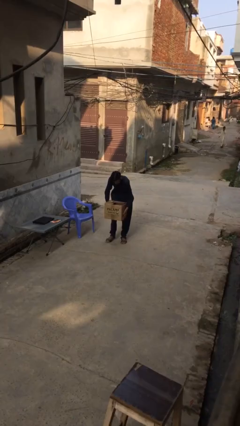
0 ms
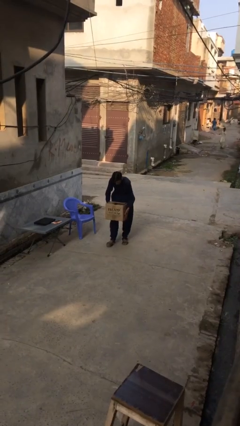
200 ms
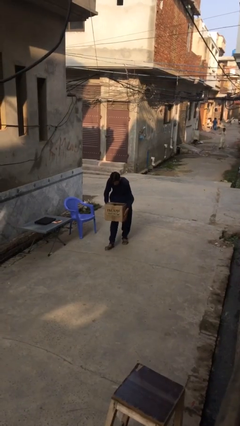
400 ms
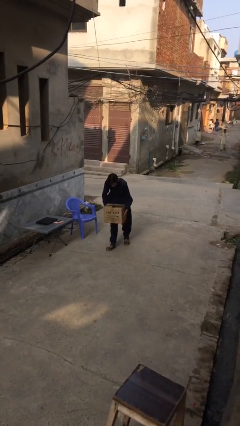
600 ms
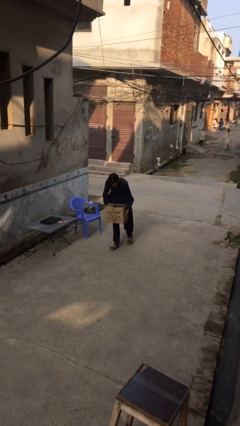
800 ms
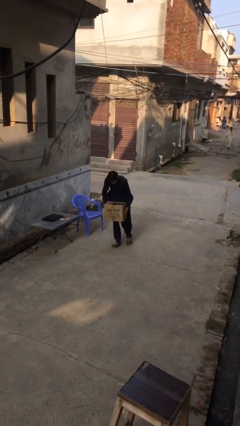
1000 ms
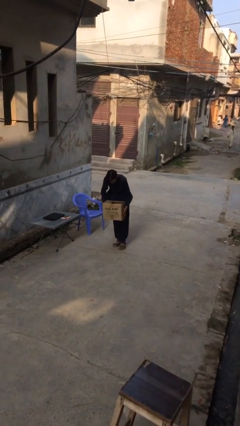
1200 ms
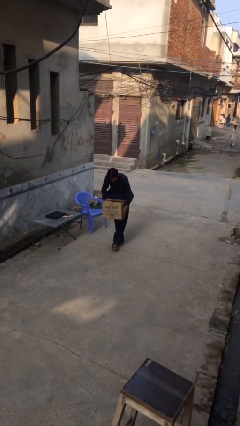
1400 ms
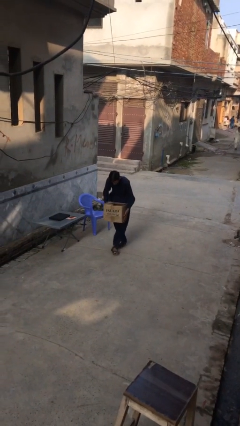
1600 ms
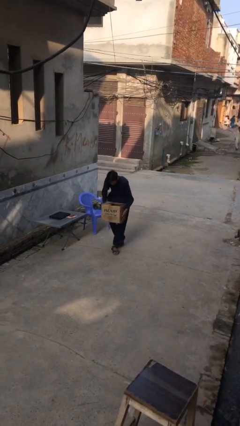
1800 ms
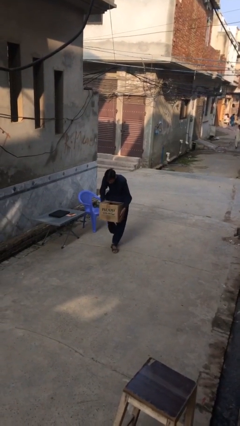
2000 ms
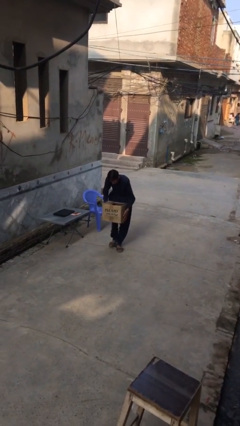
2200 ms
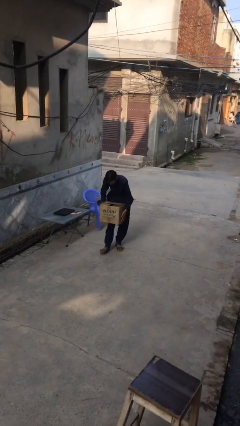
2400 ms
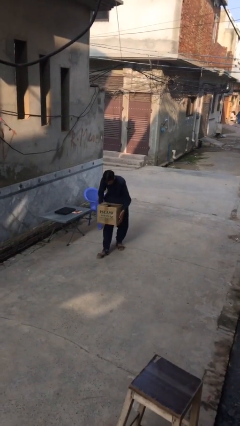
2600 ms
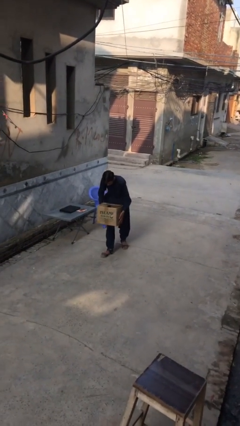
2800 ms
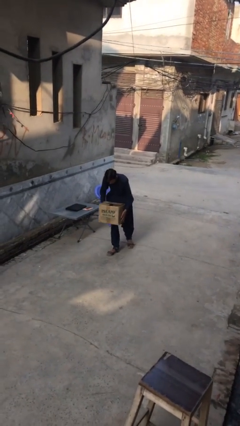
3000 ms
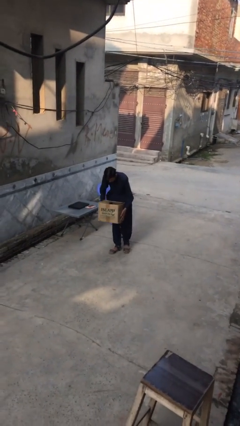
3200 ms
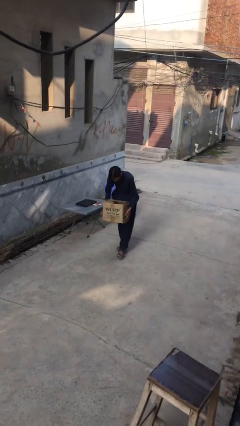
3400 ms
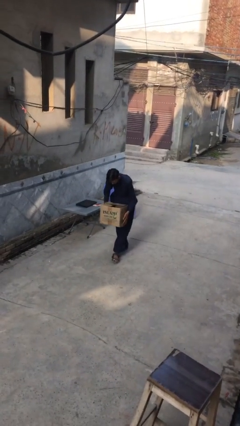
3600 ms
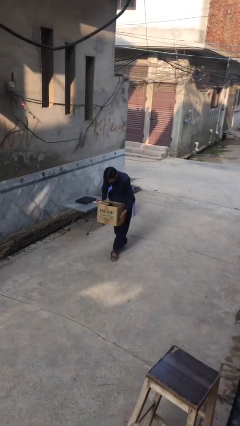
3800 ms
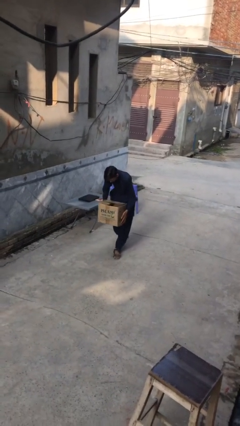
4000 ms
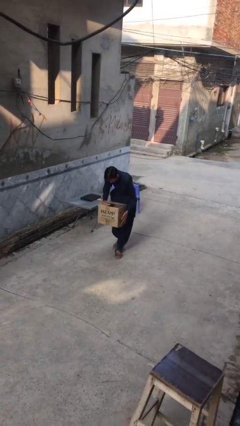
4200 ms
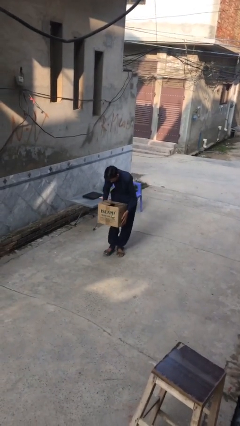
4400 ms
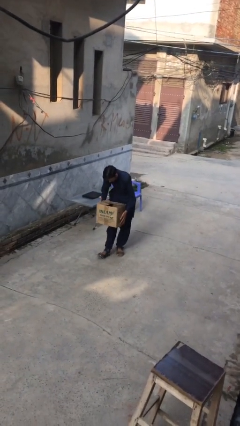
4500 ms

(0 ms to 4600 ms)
person carries heavy object

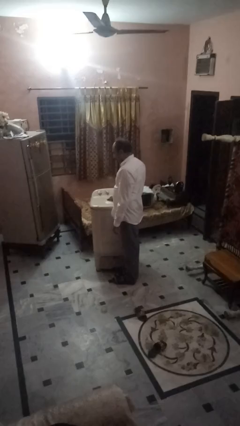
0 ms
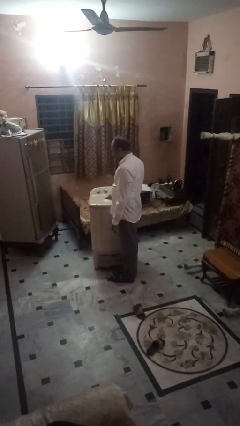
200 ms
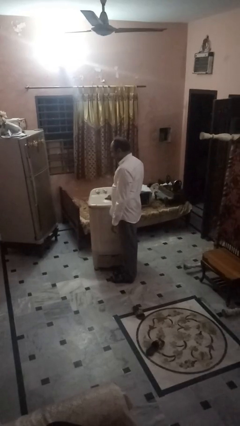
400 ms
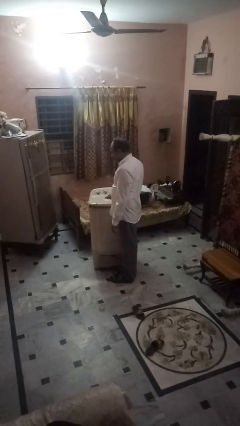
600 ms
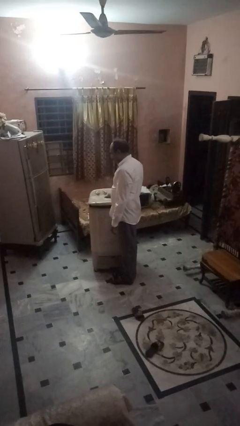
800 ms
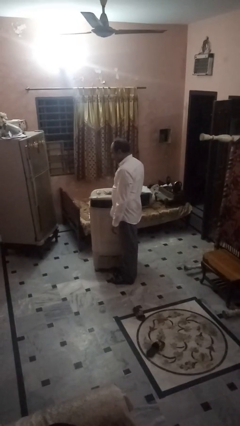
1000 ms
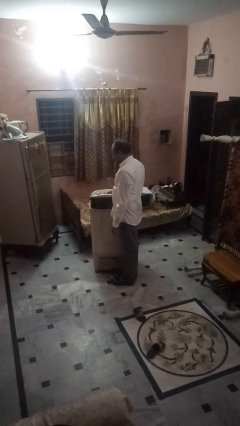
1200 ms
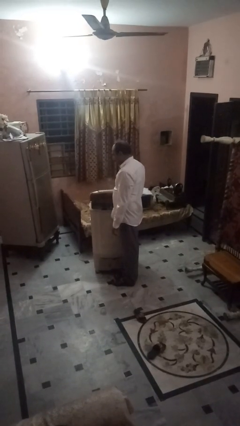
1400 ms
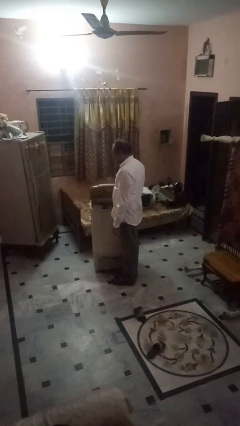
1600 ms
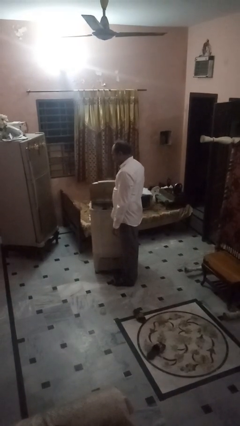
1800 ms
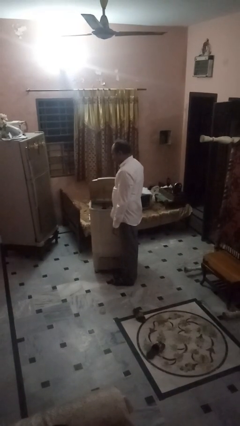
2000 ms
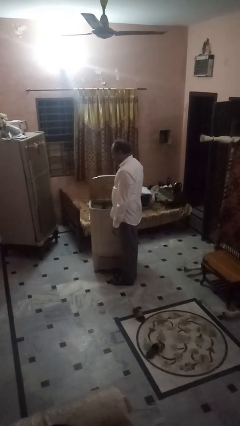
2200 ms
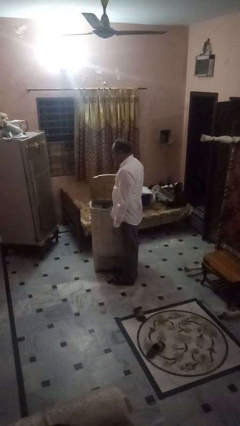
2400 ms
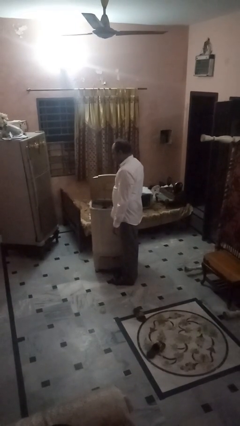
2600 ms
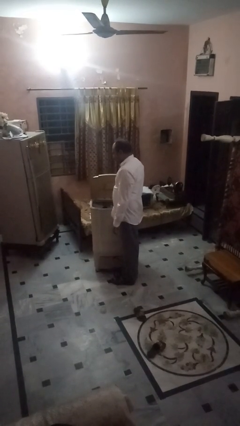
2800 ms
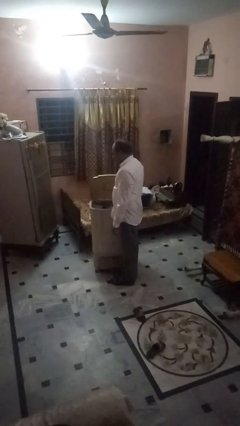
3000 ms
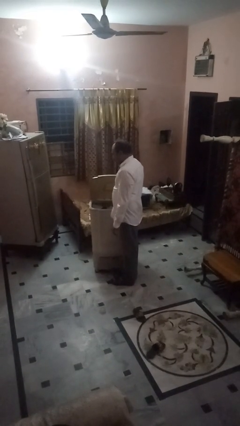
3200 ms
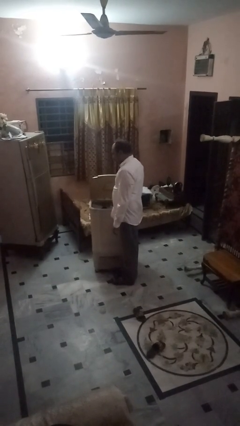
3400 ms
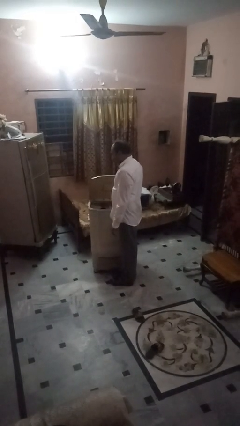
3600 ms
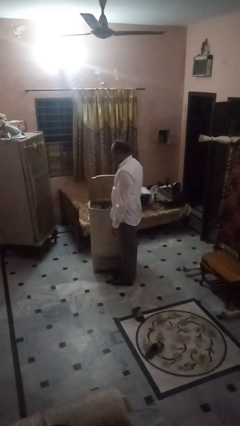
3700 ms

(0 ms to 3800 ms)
person opens clothes washer

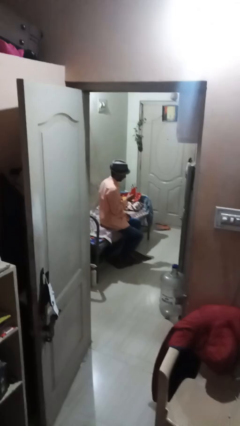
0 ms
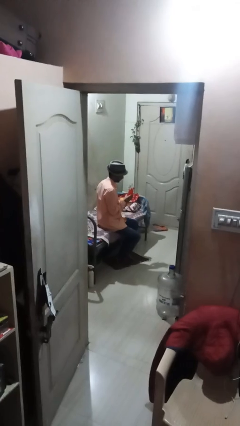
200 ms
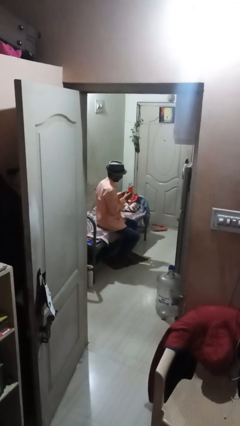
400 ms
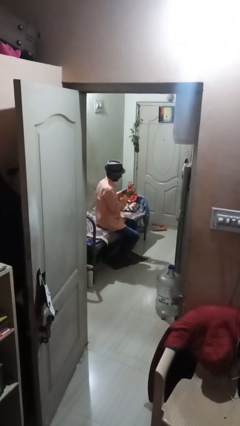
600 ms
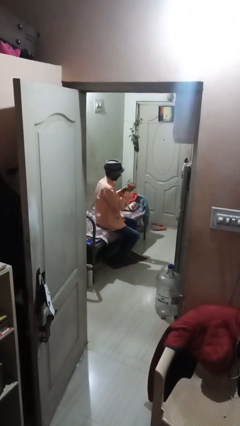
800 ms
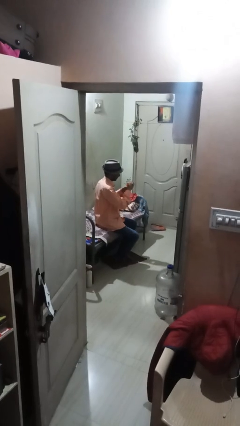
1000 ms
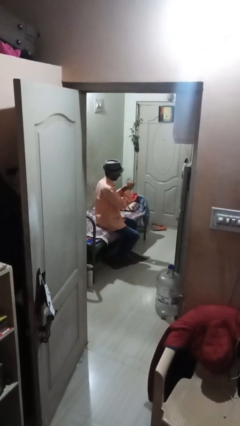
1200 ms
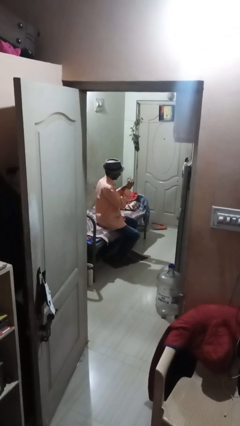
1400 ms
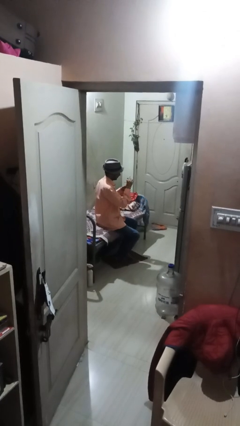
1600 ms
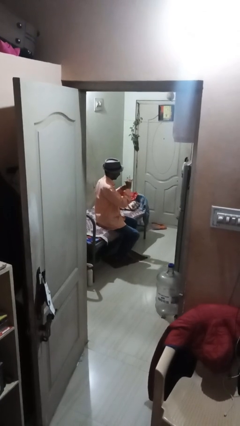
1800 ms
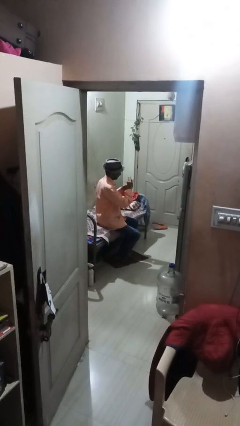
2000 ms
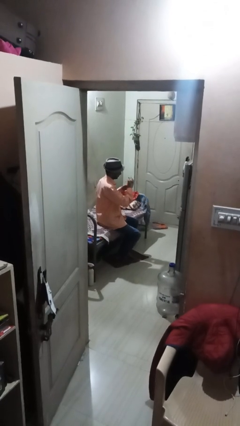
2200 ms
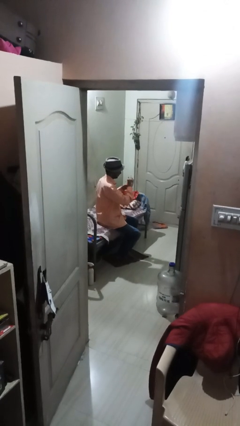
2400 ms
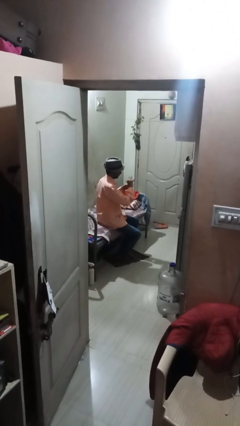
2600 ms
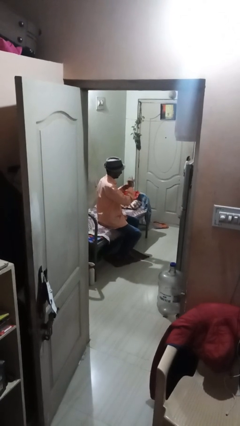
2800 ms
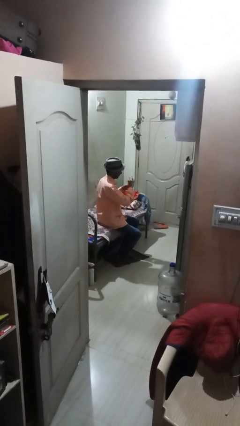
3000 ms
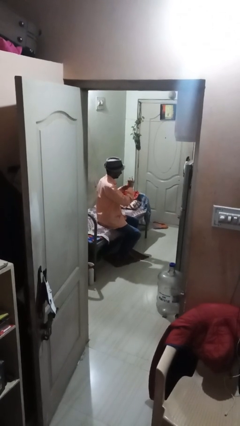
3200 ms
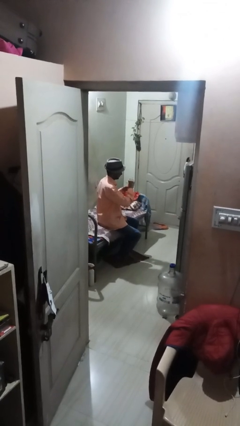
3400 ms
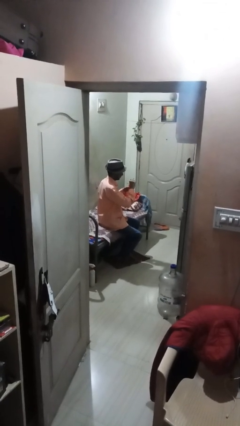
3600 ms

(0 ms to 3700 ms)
person arranges flowers in vase

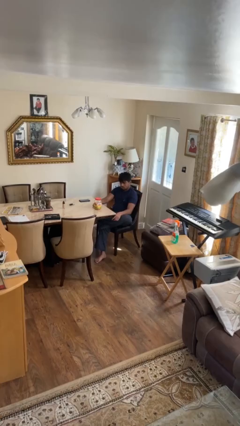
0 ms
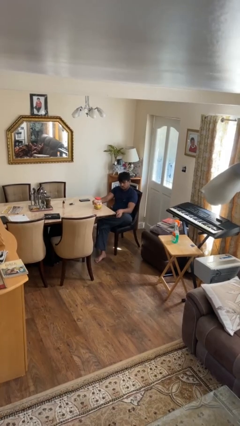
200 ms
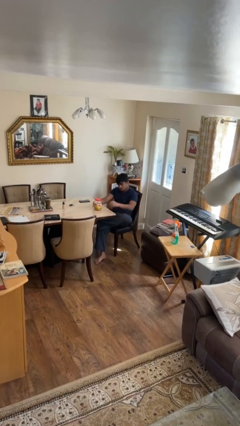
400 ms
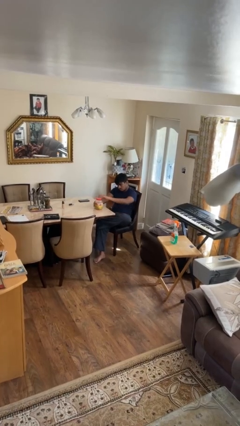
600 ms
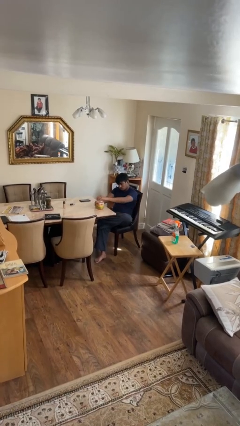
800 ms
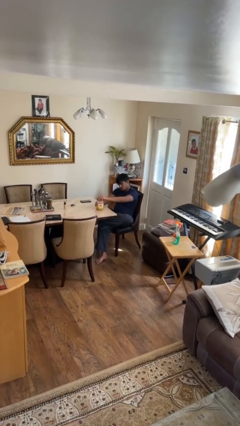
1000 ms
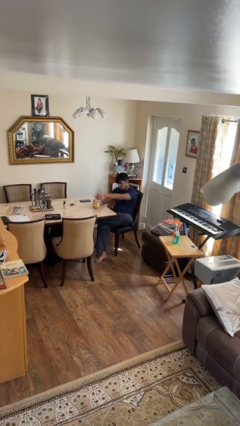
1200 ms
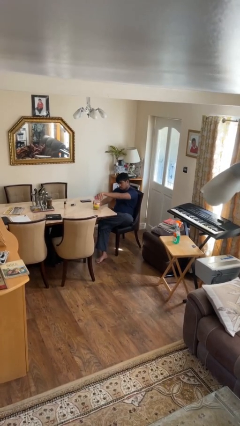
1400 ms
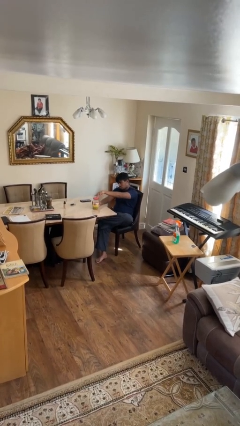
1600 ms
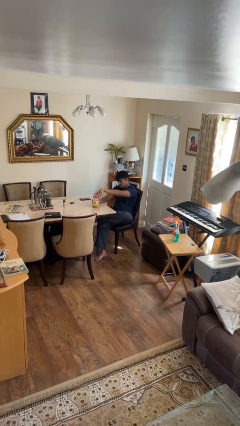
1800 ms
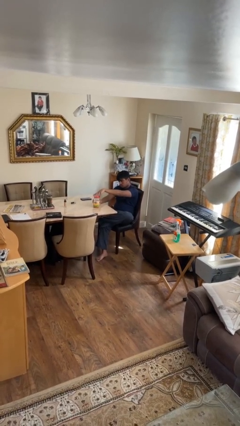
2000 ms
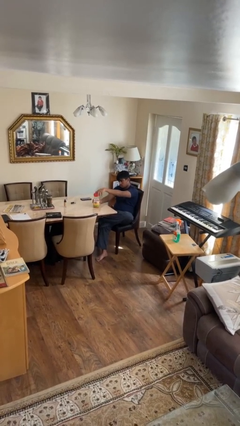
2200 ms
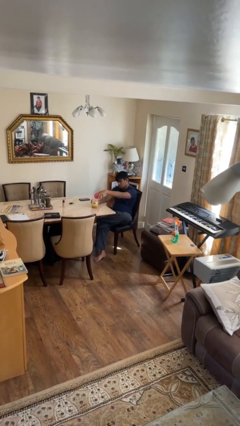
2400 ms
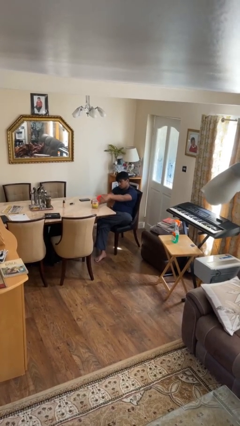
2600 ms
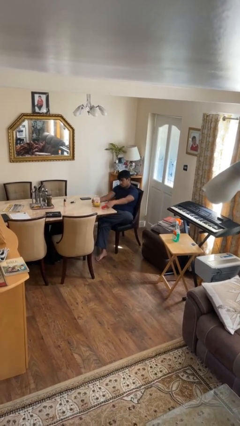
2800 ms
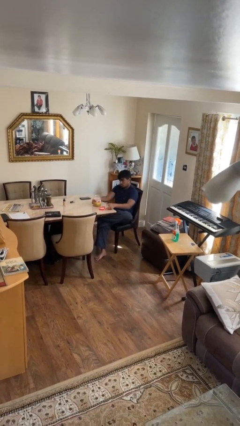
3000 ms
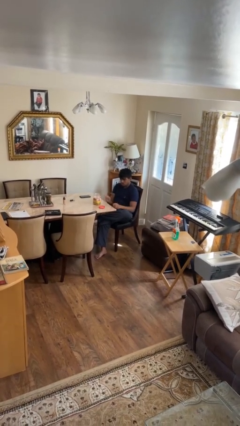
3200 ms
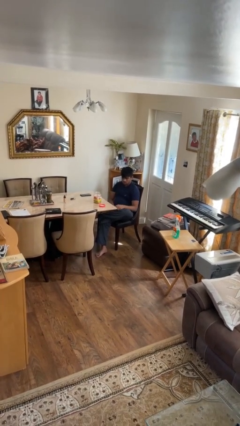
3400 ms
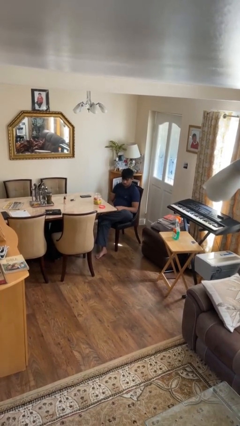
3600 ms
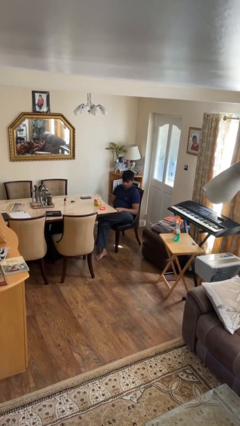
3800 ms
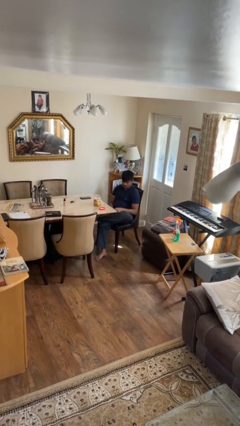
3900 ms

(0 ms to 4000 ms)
person opens jar

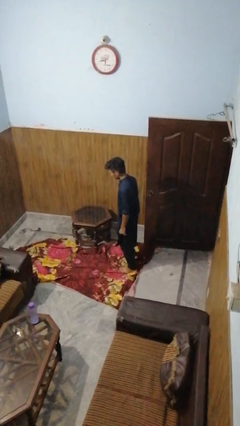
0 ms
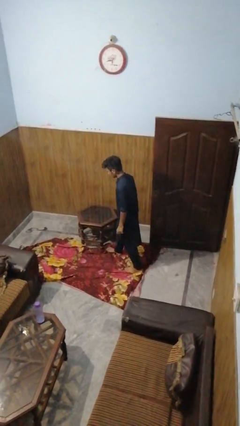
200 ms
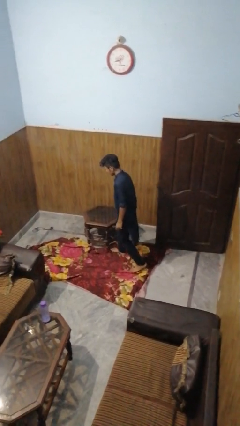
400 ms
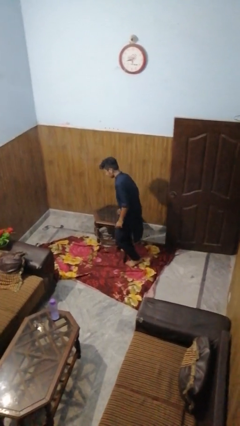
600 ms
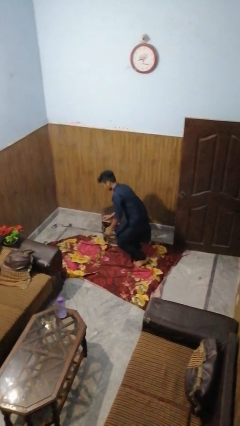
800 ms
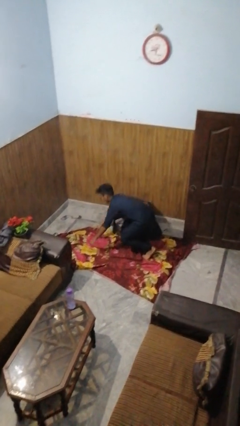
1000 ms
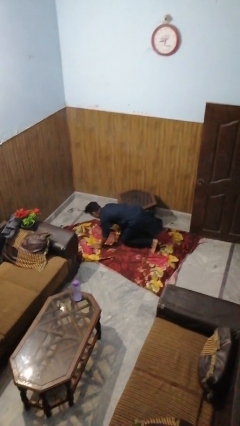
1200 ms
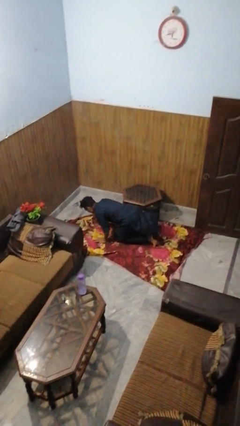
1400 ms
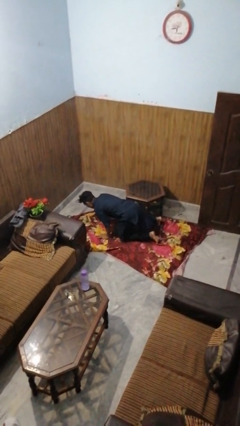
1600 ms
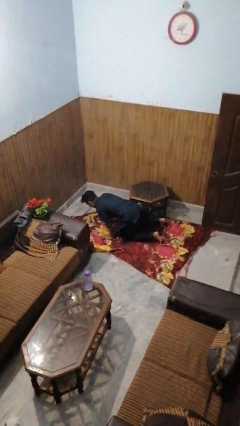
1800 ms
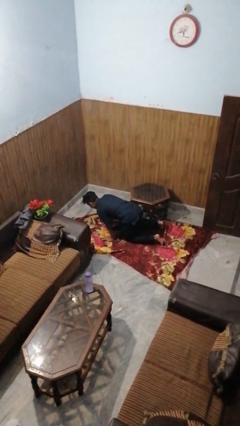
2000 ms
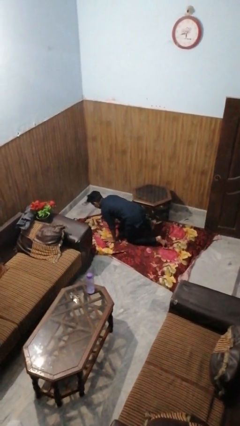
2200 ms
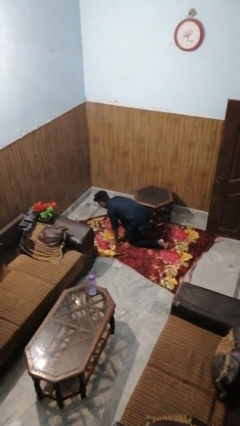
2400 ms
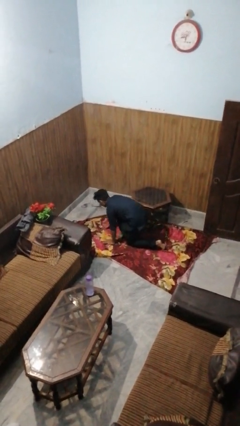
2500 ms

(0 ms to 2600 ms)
person bumps into table
